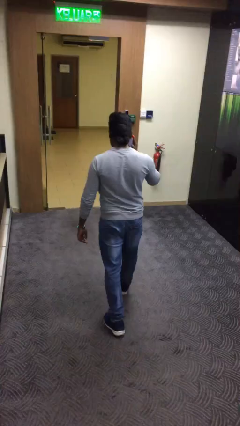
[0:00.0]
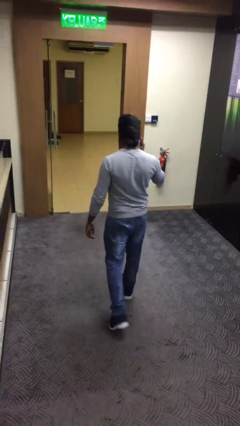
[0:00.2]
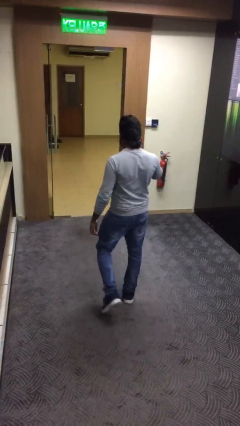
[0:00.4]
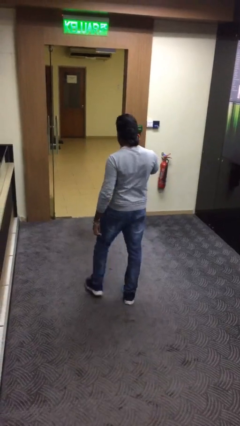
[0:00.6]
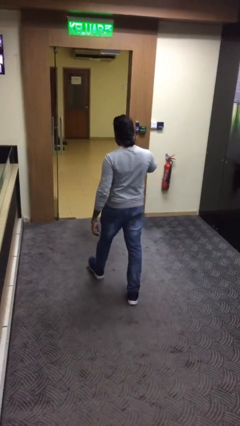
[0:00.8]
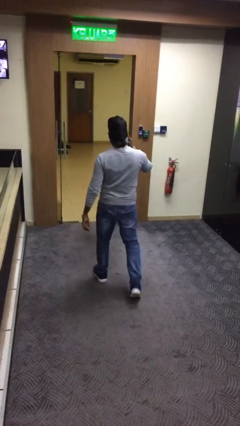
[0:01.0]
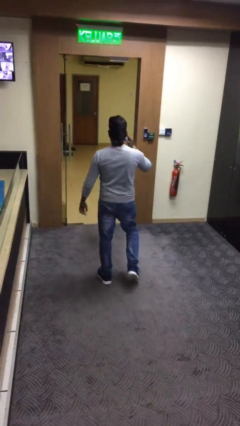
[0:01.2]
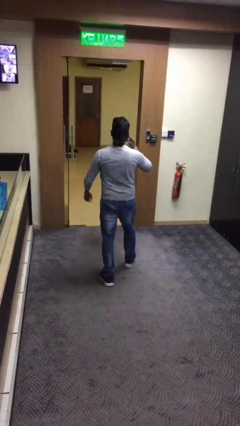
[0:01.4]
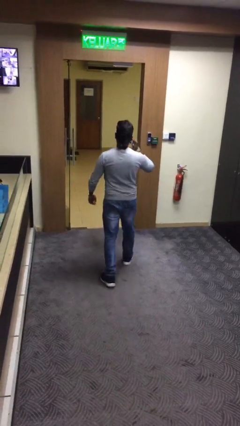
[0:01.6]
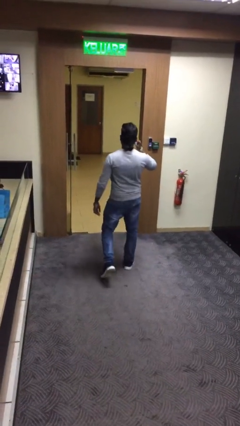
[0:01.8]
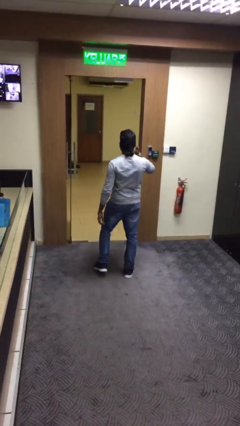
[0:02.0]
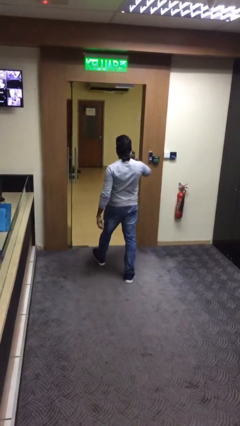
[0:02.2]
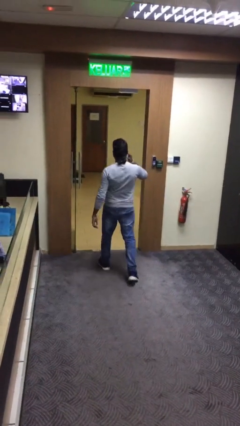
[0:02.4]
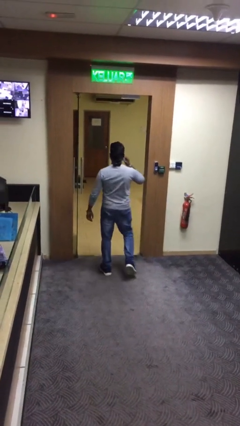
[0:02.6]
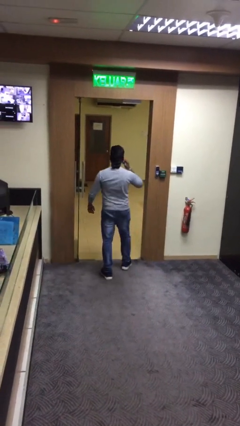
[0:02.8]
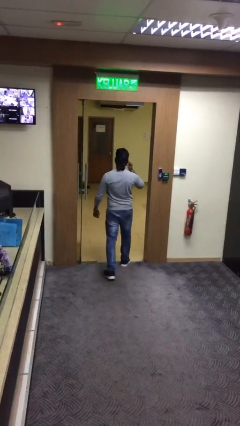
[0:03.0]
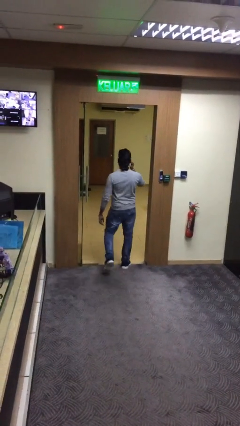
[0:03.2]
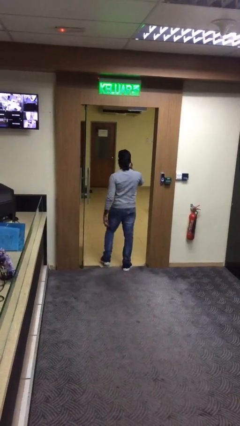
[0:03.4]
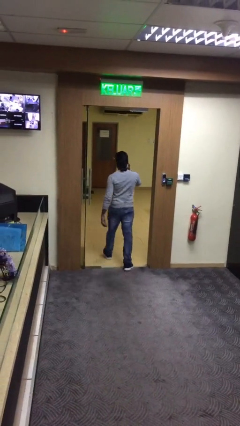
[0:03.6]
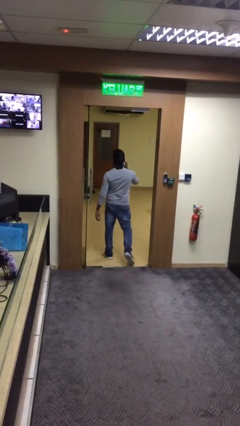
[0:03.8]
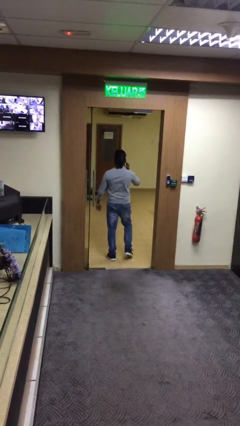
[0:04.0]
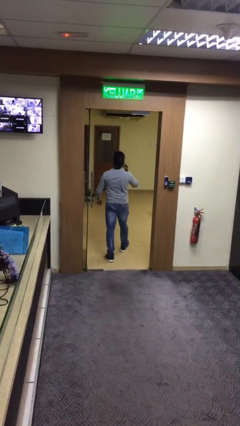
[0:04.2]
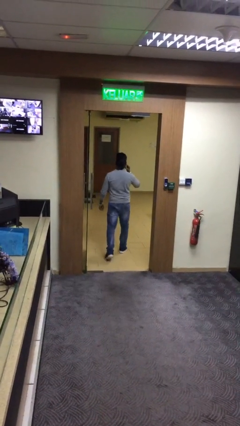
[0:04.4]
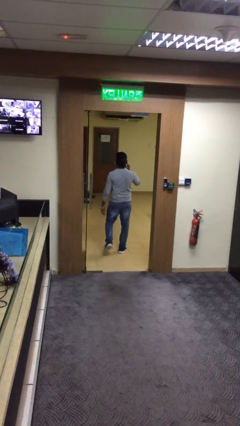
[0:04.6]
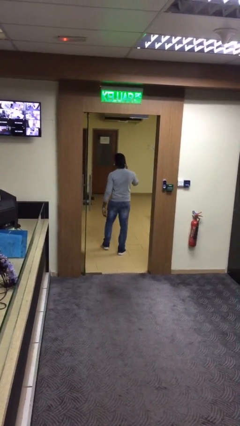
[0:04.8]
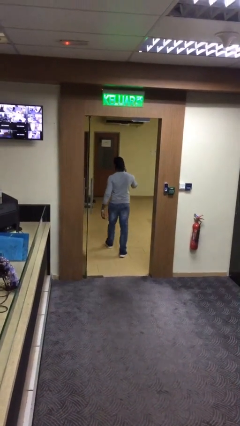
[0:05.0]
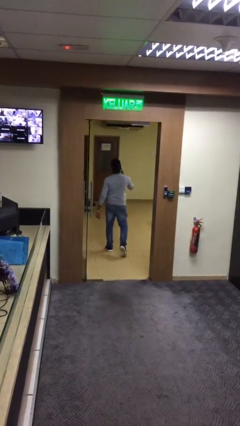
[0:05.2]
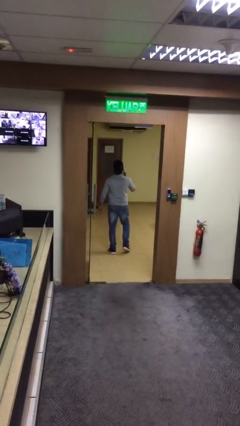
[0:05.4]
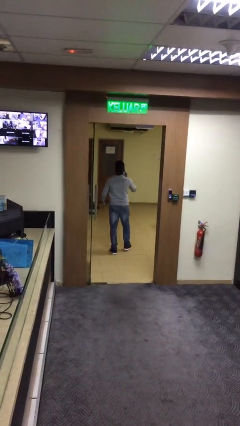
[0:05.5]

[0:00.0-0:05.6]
person exits scene through structure

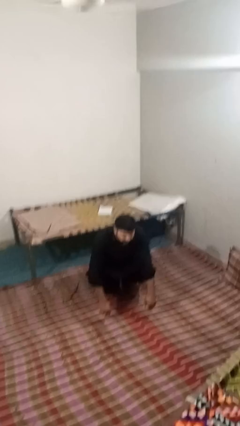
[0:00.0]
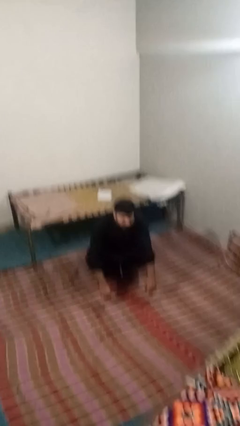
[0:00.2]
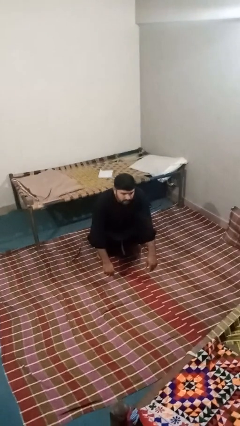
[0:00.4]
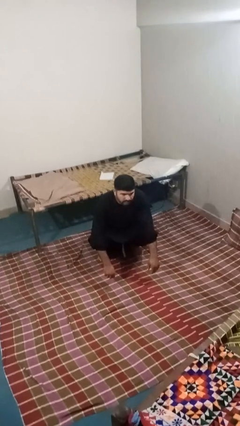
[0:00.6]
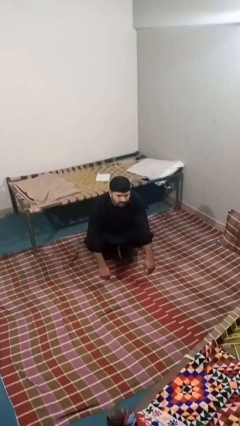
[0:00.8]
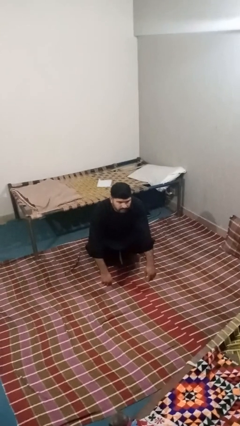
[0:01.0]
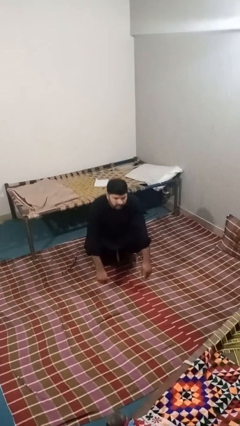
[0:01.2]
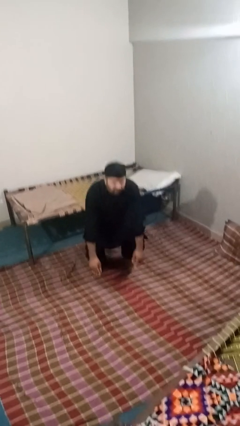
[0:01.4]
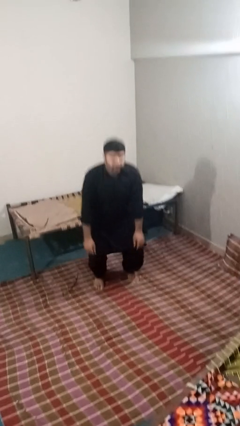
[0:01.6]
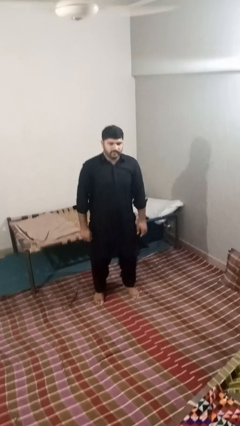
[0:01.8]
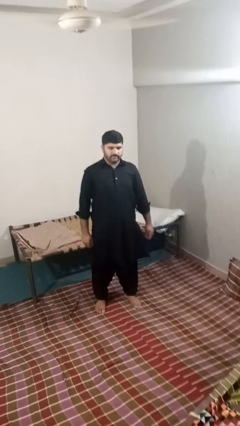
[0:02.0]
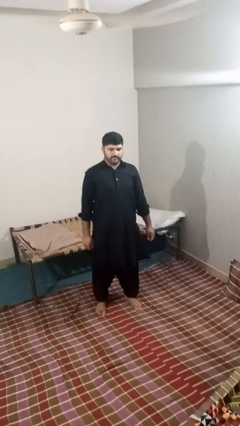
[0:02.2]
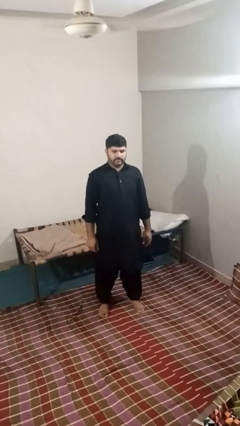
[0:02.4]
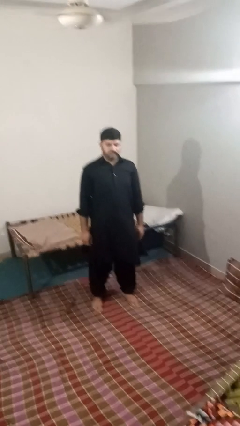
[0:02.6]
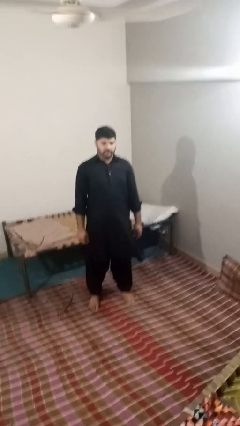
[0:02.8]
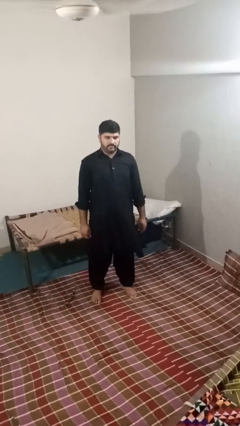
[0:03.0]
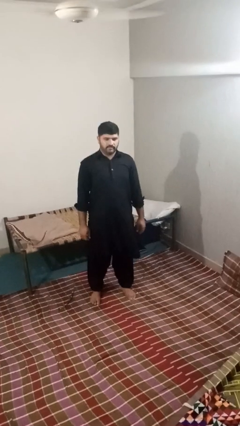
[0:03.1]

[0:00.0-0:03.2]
person squats

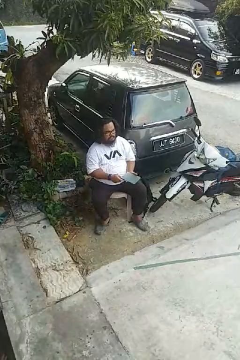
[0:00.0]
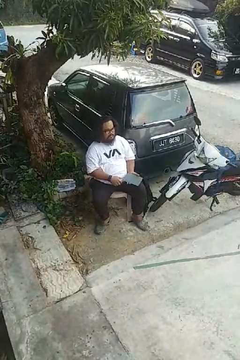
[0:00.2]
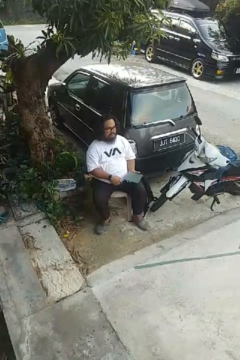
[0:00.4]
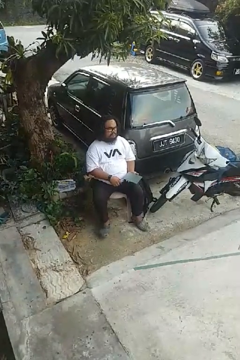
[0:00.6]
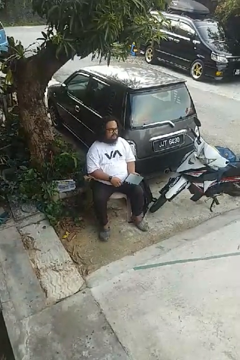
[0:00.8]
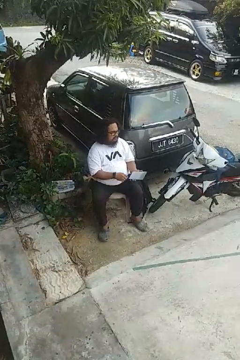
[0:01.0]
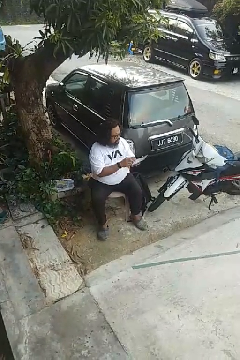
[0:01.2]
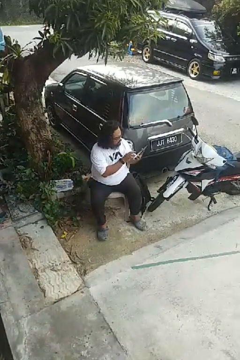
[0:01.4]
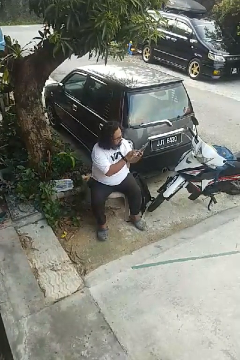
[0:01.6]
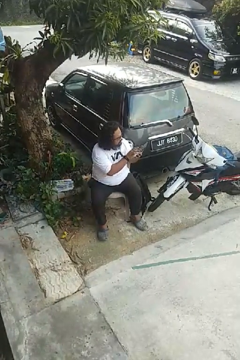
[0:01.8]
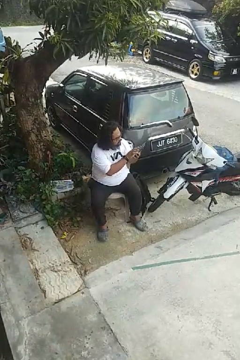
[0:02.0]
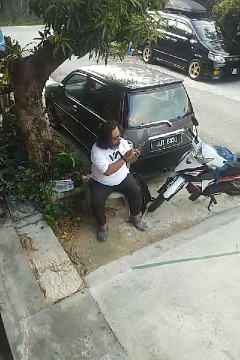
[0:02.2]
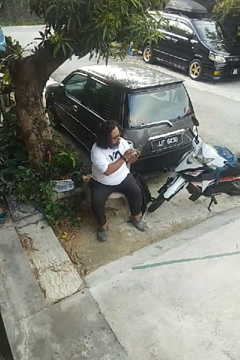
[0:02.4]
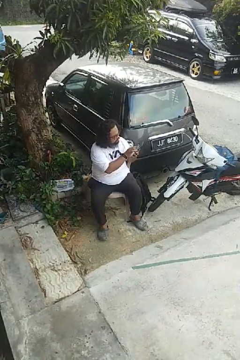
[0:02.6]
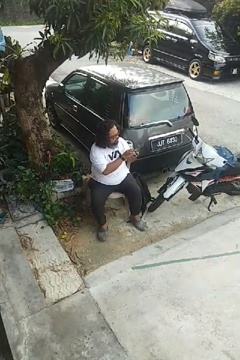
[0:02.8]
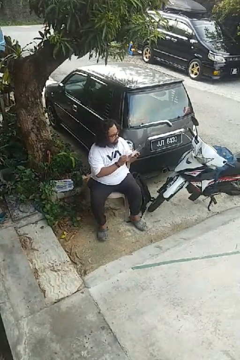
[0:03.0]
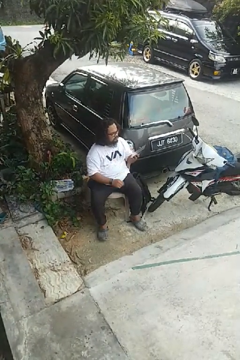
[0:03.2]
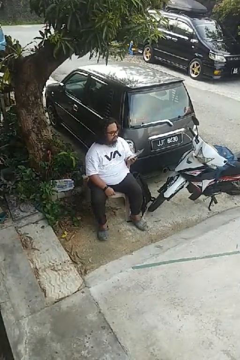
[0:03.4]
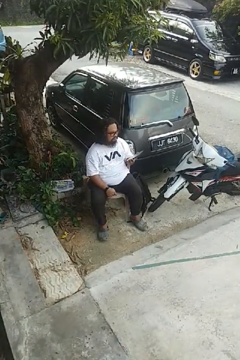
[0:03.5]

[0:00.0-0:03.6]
person interacts with tablet

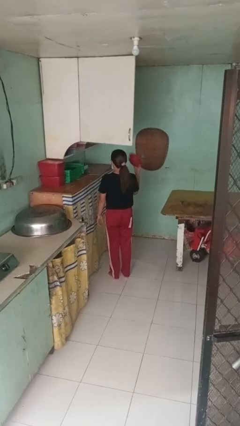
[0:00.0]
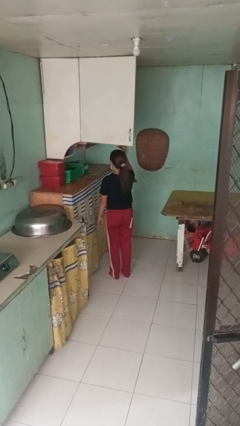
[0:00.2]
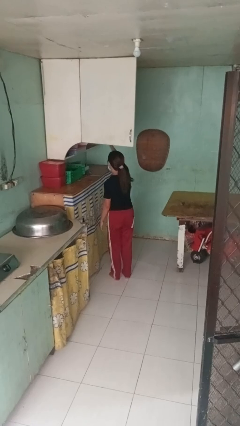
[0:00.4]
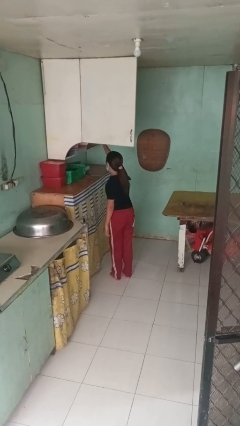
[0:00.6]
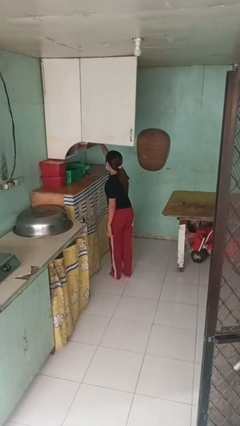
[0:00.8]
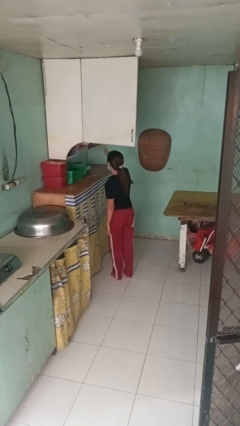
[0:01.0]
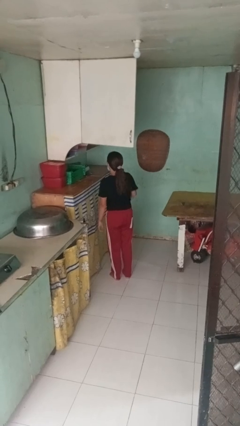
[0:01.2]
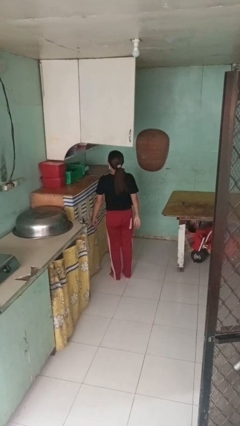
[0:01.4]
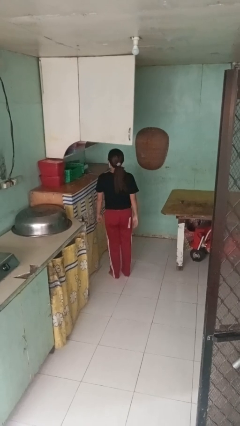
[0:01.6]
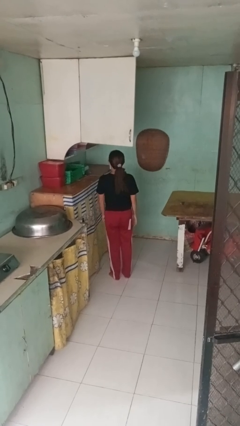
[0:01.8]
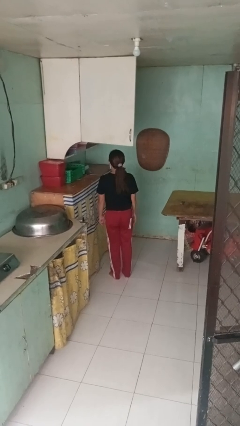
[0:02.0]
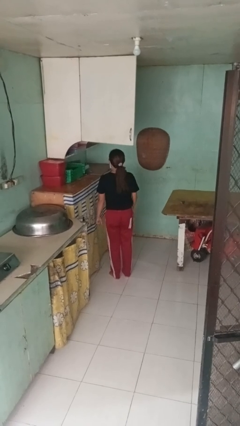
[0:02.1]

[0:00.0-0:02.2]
person puts object in cabinet

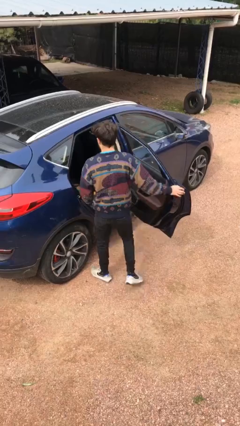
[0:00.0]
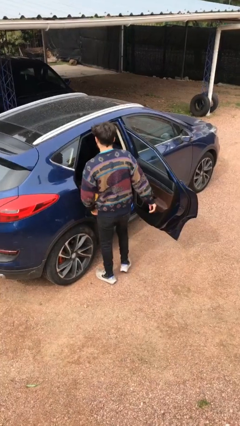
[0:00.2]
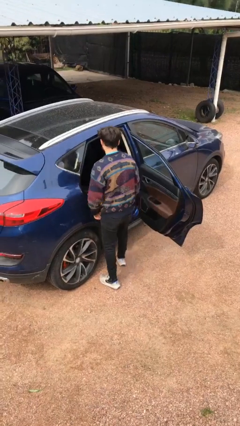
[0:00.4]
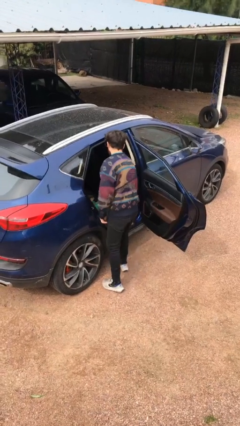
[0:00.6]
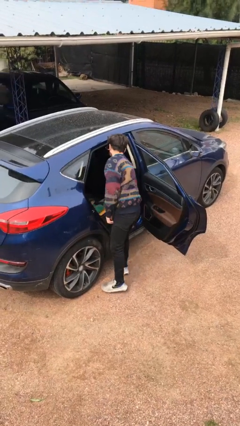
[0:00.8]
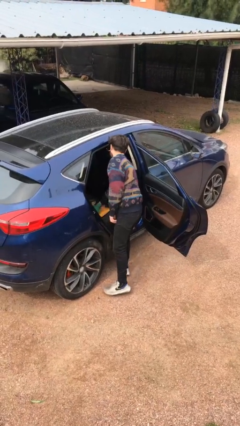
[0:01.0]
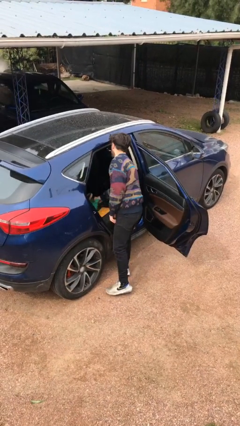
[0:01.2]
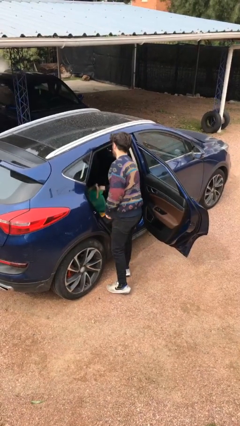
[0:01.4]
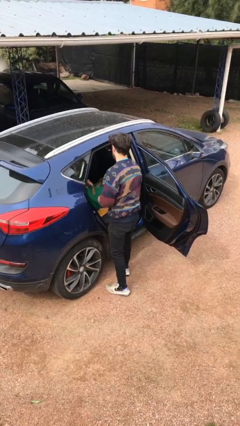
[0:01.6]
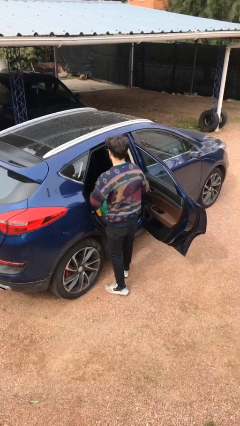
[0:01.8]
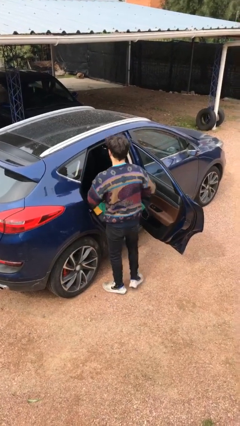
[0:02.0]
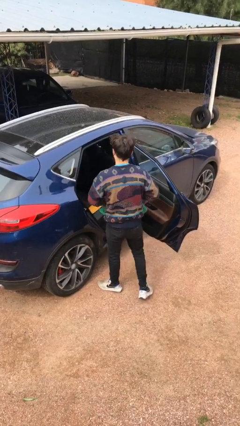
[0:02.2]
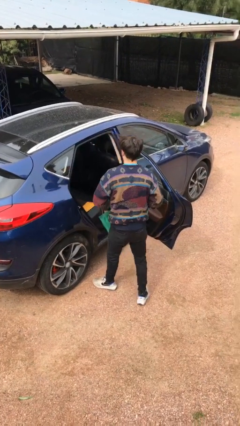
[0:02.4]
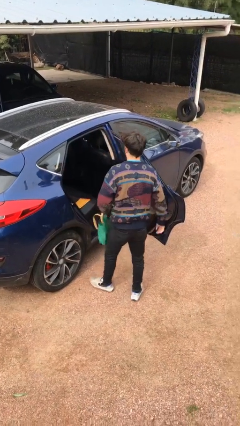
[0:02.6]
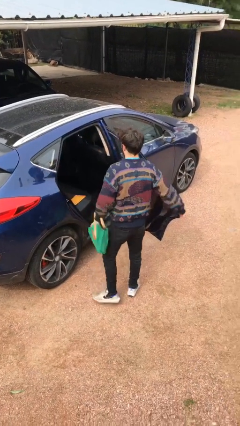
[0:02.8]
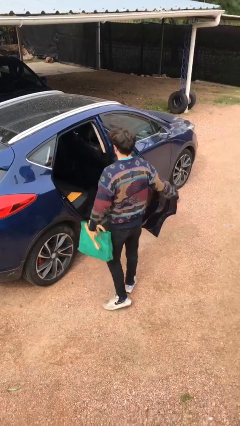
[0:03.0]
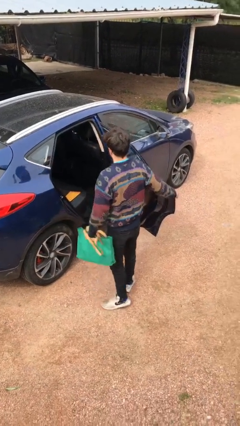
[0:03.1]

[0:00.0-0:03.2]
person unloads car

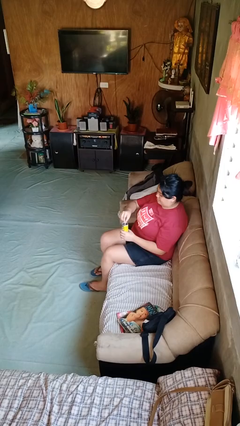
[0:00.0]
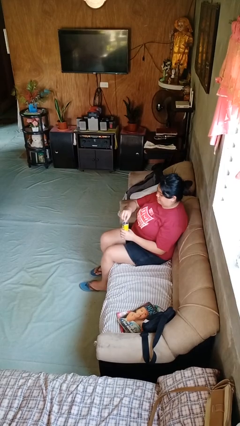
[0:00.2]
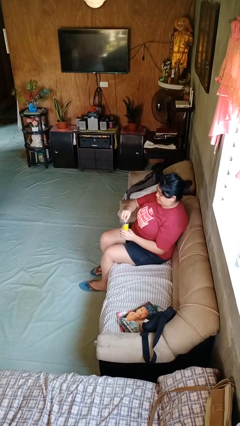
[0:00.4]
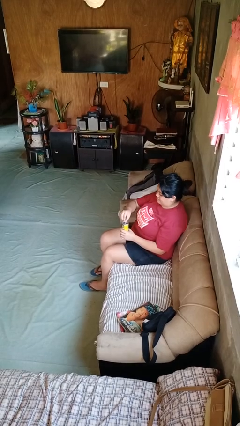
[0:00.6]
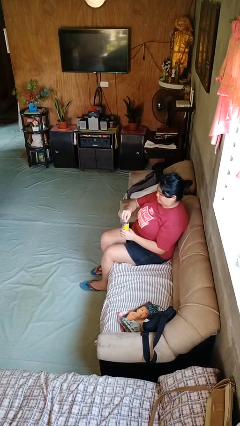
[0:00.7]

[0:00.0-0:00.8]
person opens beverage can
